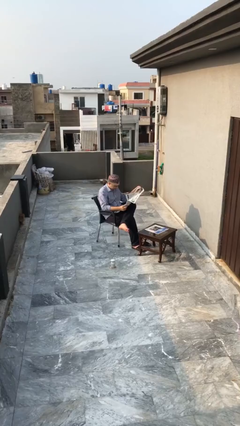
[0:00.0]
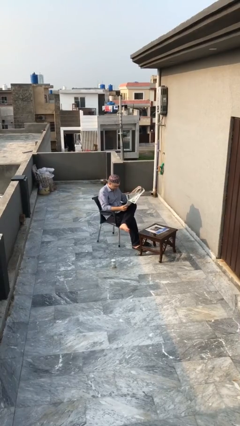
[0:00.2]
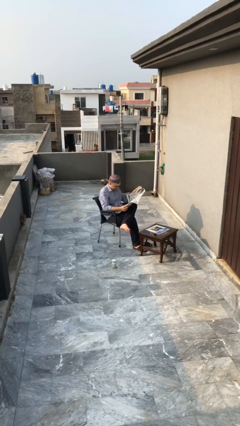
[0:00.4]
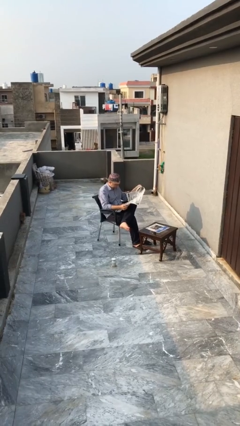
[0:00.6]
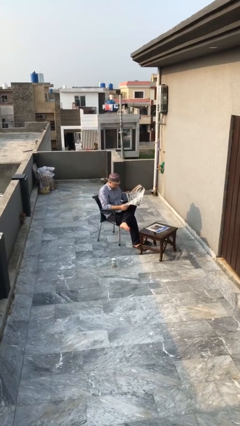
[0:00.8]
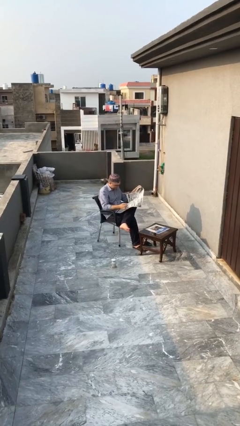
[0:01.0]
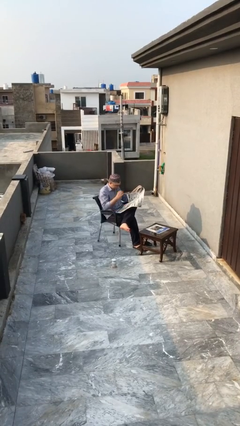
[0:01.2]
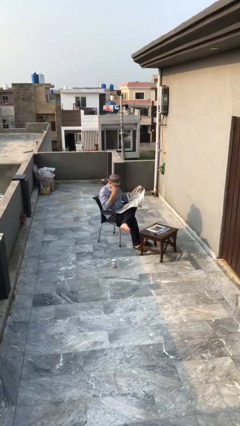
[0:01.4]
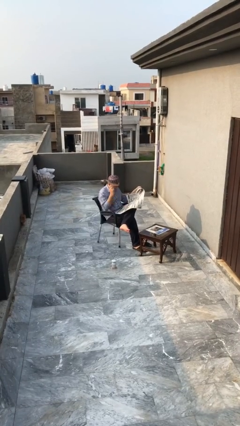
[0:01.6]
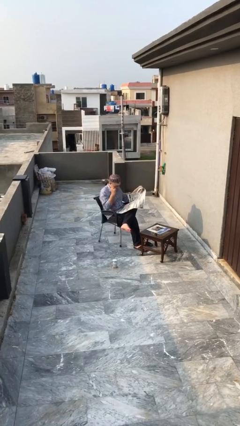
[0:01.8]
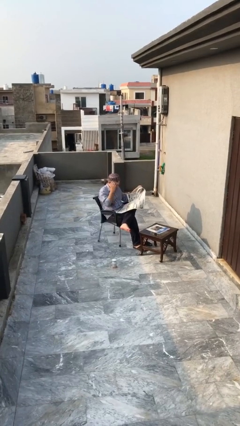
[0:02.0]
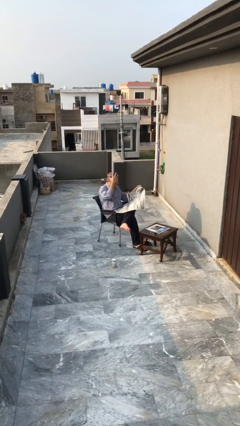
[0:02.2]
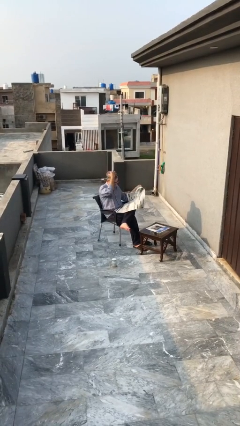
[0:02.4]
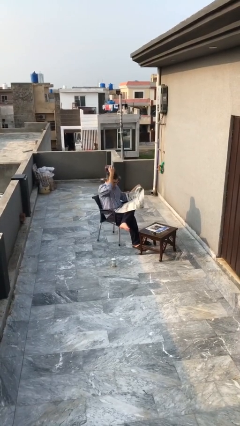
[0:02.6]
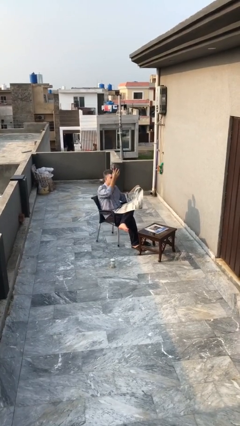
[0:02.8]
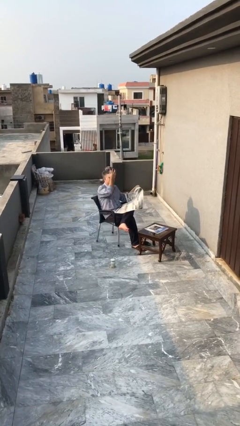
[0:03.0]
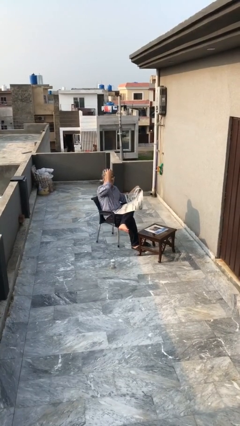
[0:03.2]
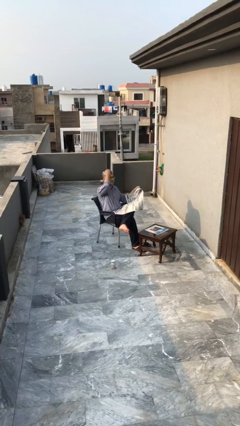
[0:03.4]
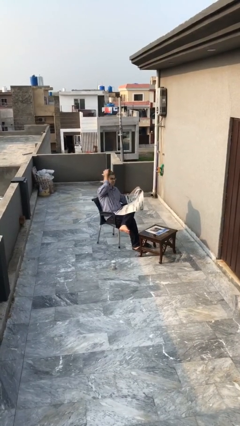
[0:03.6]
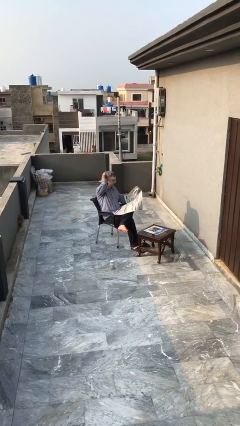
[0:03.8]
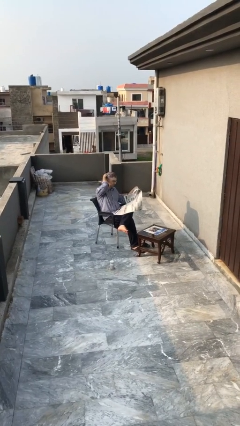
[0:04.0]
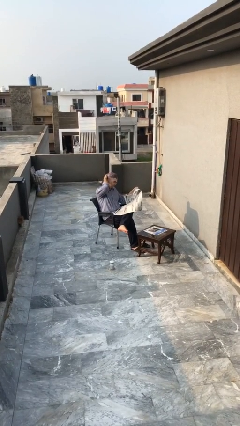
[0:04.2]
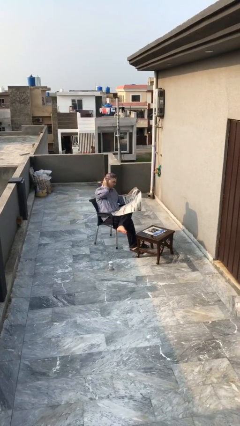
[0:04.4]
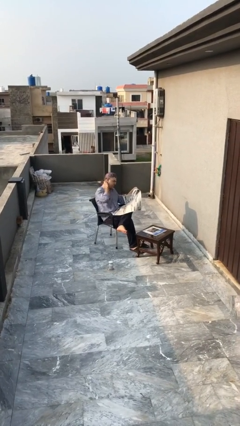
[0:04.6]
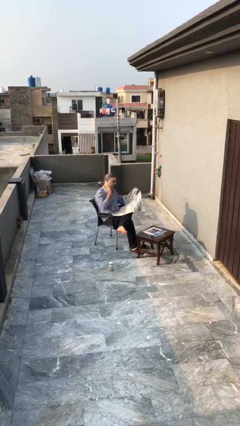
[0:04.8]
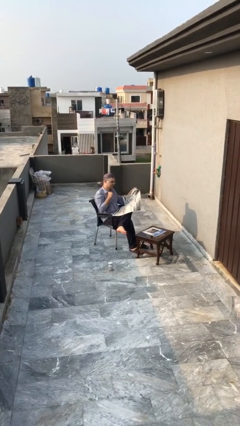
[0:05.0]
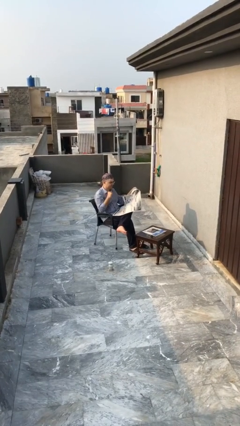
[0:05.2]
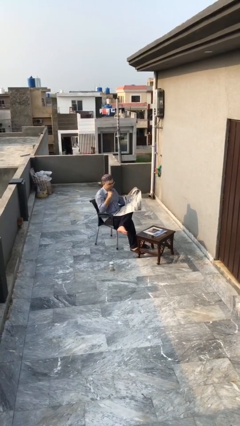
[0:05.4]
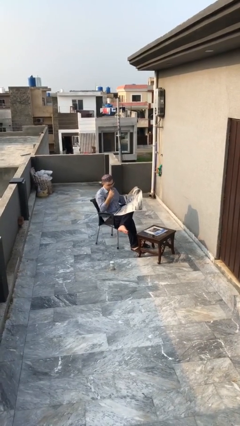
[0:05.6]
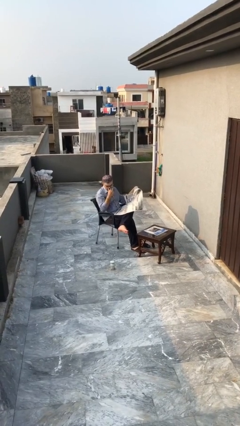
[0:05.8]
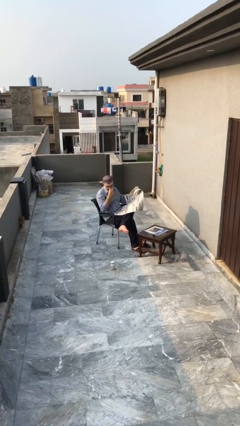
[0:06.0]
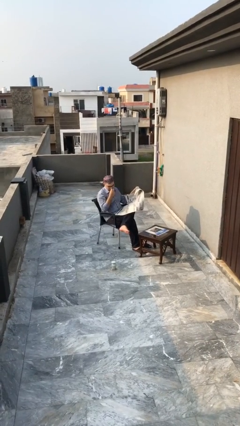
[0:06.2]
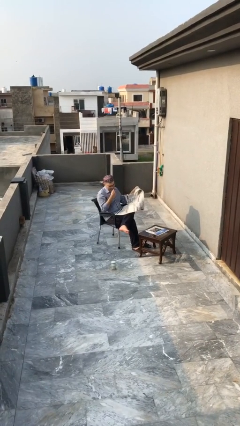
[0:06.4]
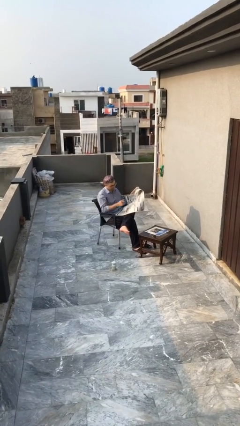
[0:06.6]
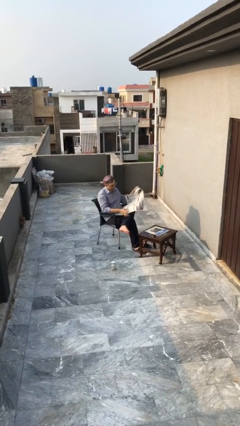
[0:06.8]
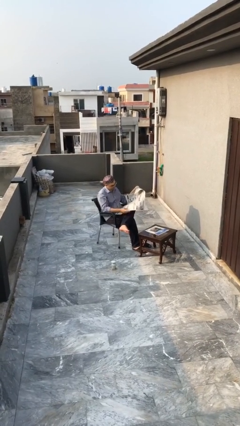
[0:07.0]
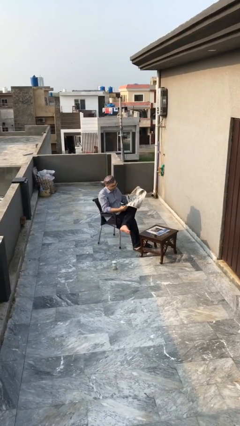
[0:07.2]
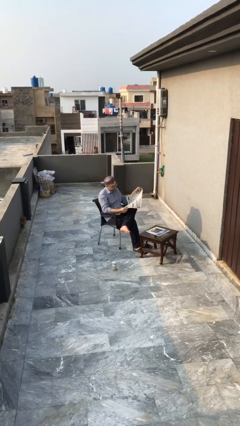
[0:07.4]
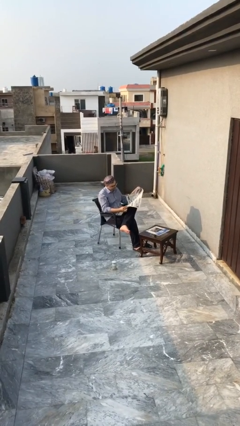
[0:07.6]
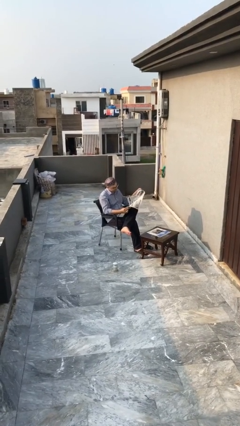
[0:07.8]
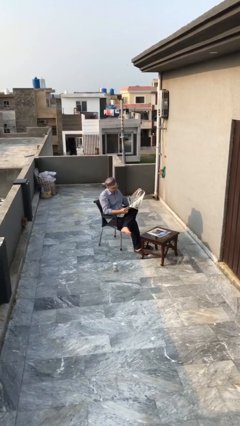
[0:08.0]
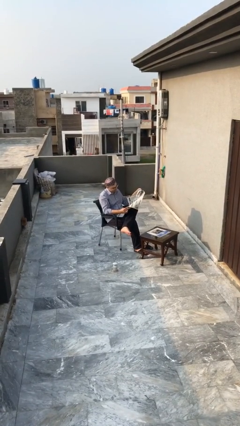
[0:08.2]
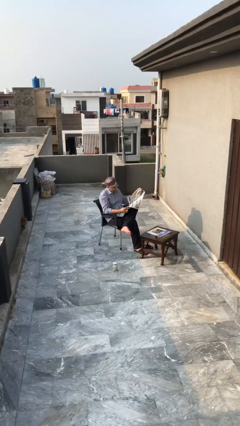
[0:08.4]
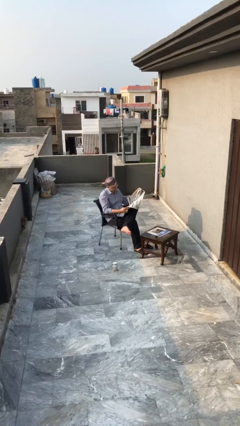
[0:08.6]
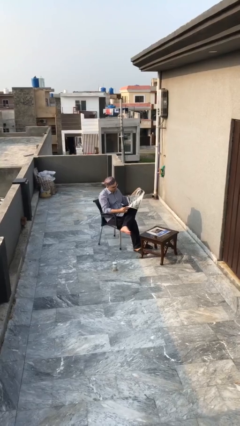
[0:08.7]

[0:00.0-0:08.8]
person reads document

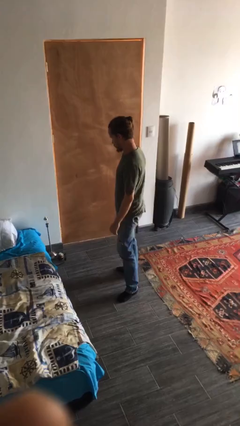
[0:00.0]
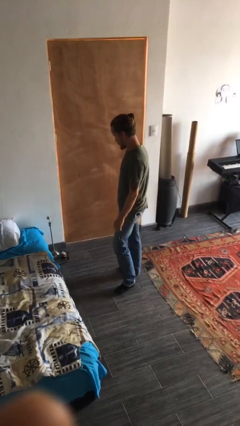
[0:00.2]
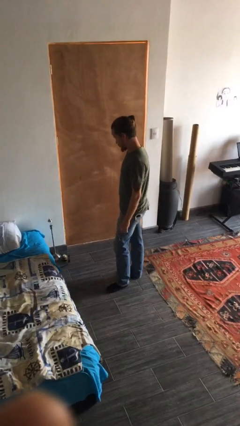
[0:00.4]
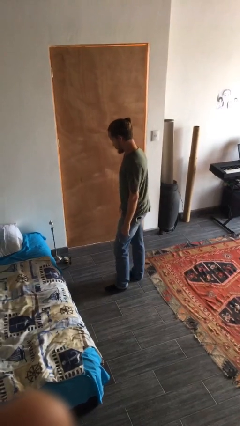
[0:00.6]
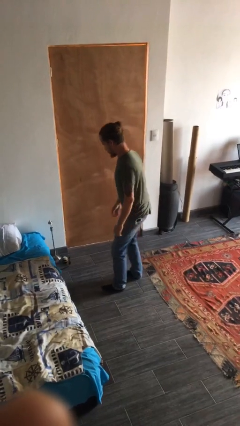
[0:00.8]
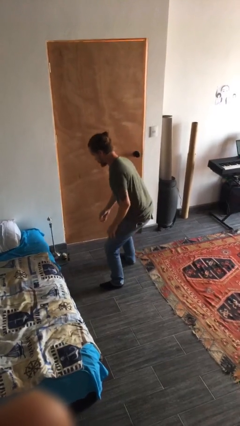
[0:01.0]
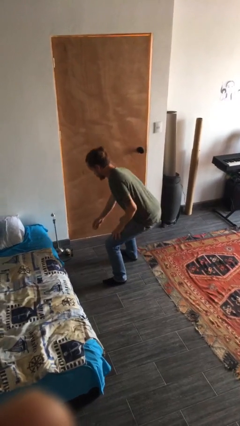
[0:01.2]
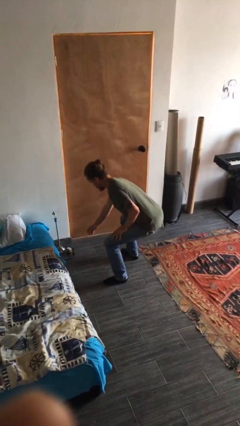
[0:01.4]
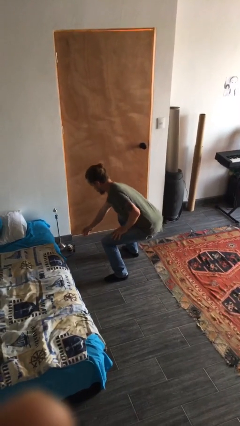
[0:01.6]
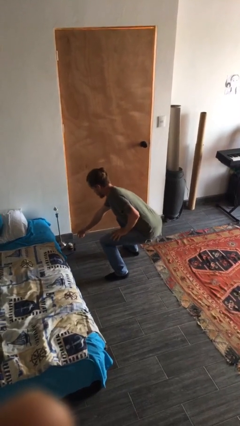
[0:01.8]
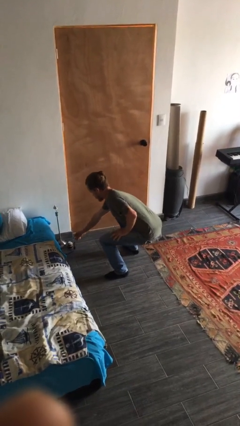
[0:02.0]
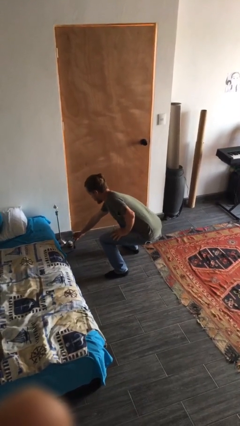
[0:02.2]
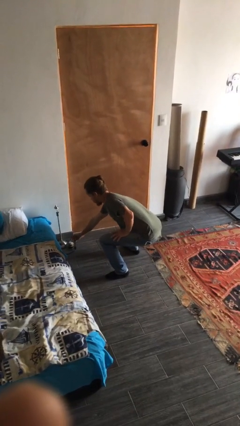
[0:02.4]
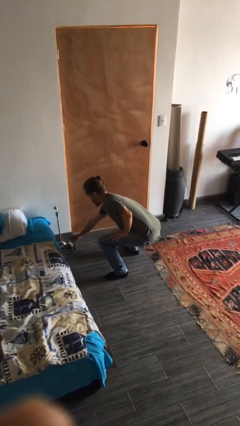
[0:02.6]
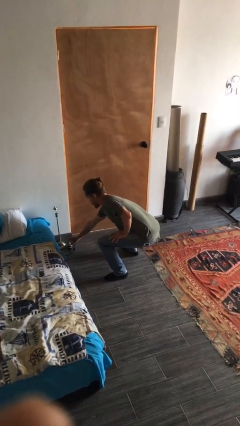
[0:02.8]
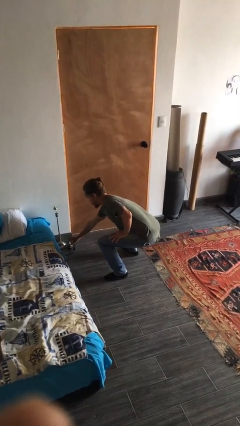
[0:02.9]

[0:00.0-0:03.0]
person squats

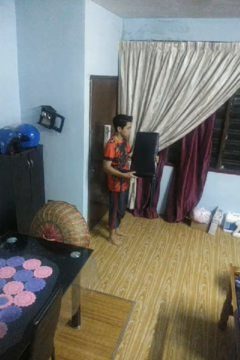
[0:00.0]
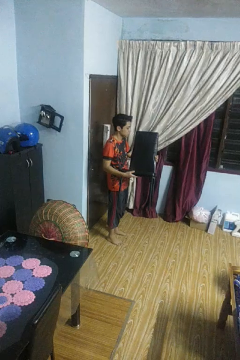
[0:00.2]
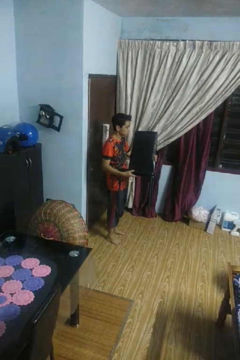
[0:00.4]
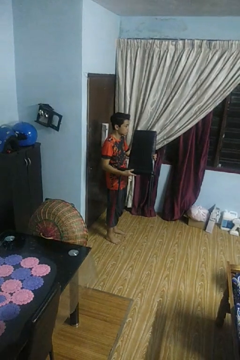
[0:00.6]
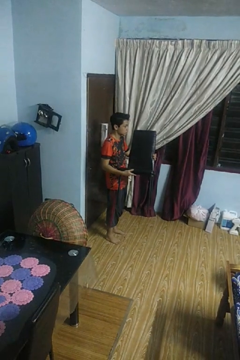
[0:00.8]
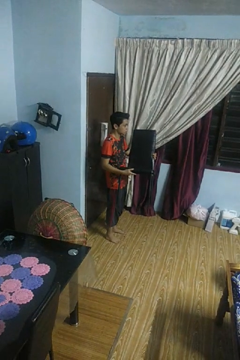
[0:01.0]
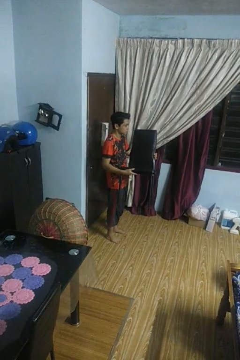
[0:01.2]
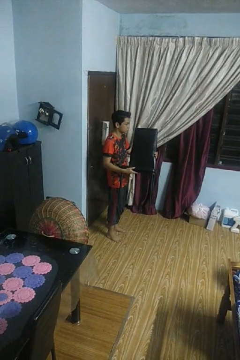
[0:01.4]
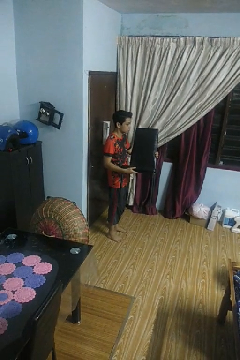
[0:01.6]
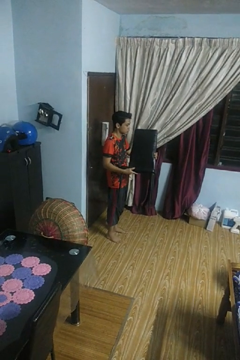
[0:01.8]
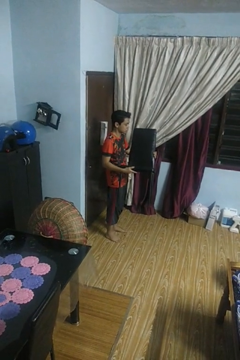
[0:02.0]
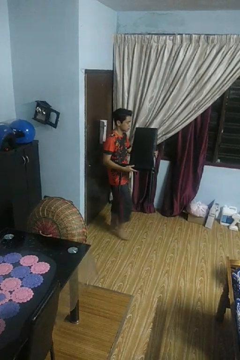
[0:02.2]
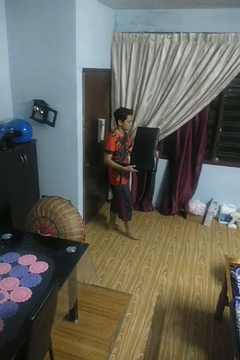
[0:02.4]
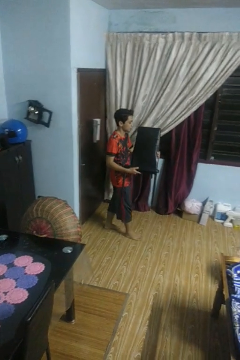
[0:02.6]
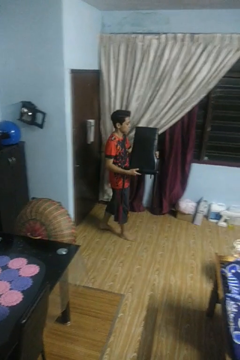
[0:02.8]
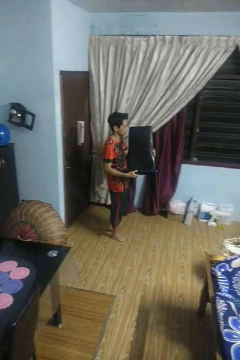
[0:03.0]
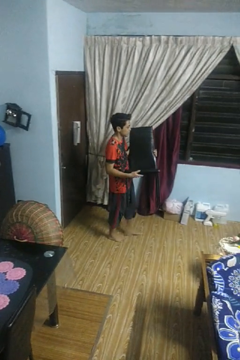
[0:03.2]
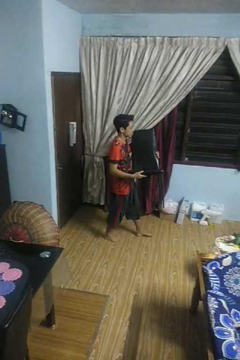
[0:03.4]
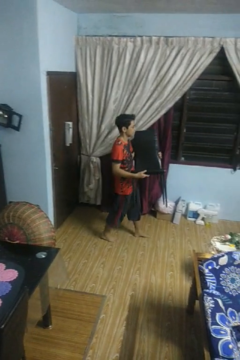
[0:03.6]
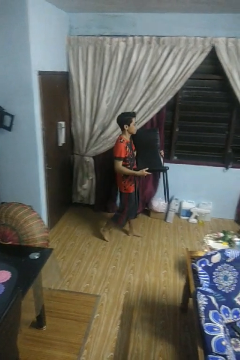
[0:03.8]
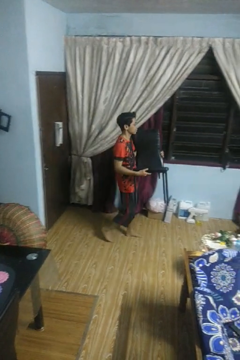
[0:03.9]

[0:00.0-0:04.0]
person carries furniture

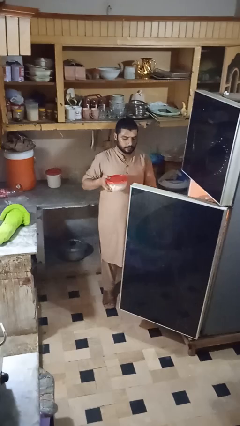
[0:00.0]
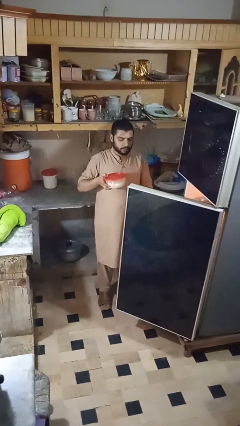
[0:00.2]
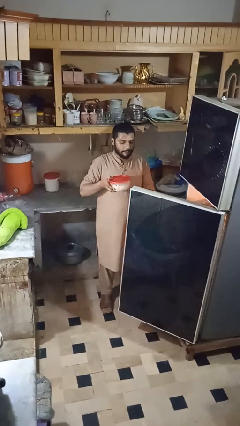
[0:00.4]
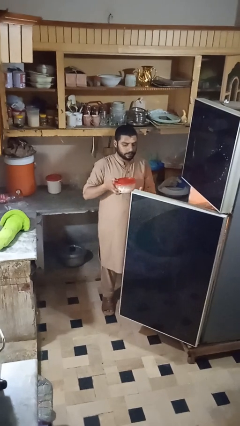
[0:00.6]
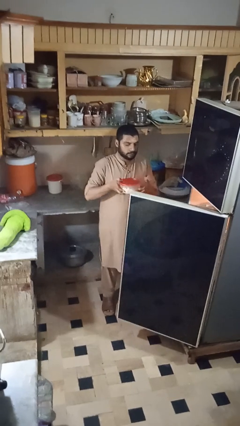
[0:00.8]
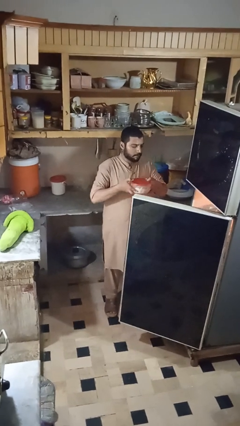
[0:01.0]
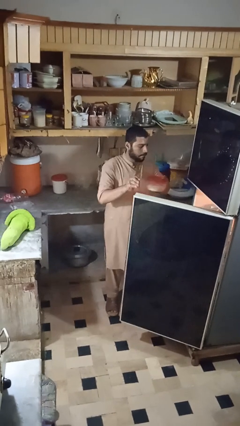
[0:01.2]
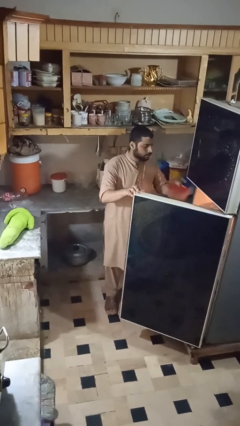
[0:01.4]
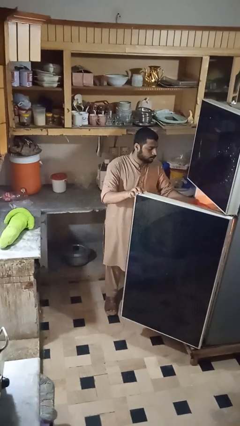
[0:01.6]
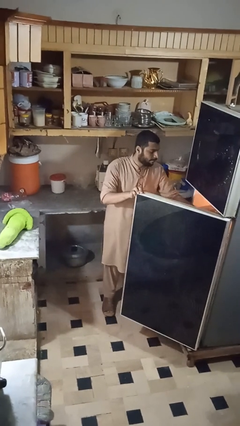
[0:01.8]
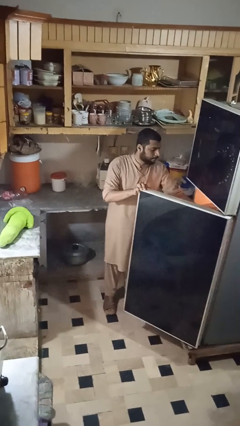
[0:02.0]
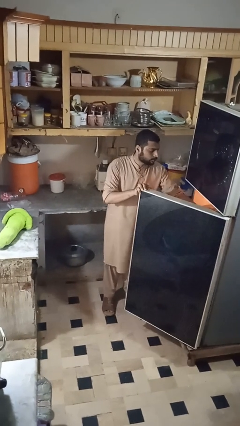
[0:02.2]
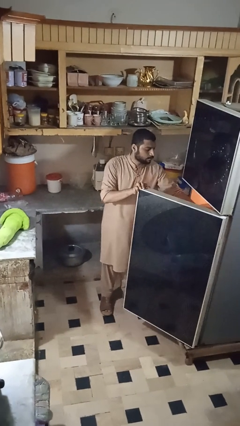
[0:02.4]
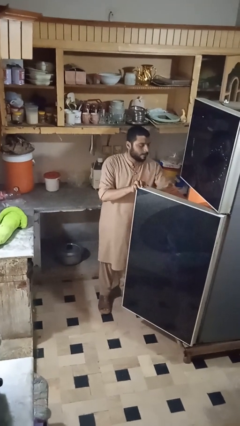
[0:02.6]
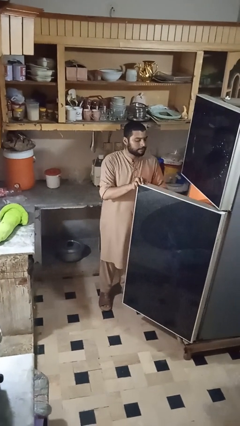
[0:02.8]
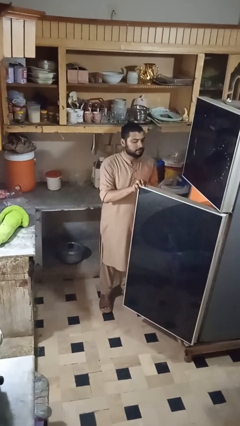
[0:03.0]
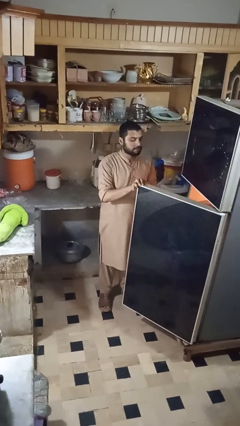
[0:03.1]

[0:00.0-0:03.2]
person puts object into refrigerator
